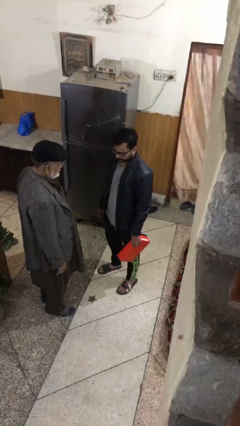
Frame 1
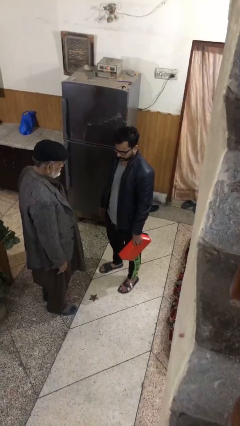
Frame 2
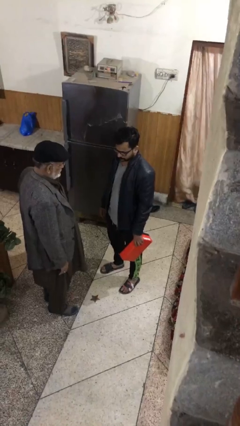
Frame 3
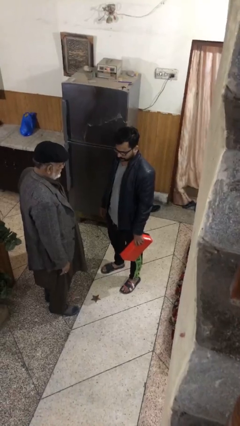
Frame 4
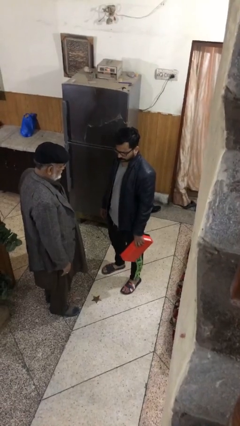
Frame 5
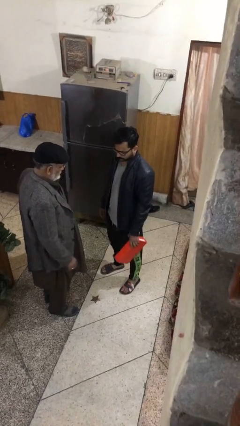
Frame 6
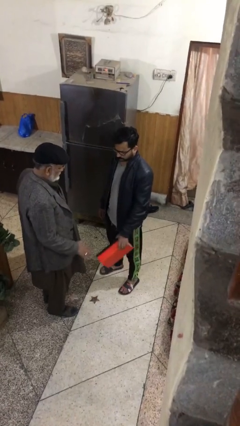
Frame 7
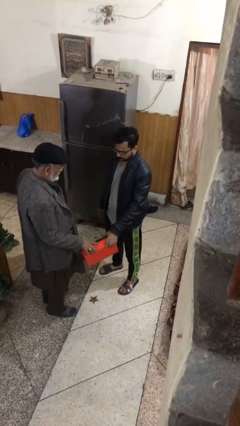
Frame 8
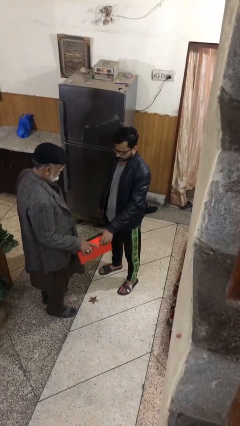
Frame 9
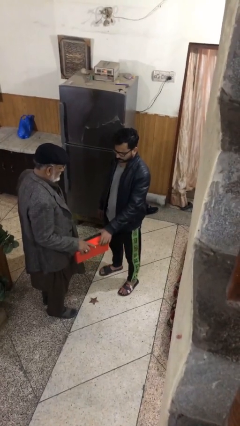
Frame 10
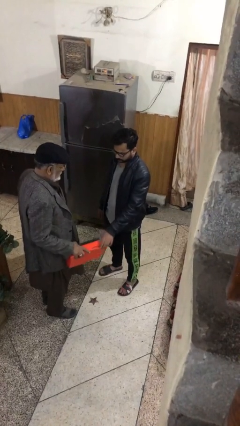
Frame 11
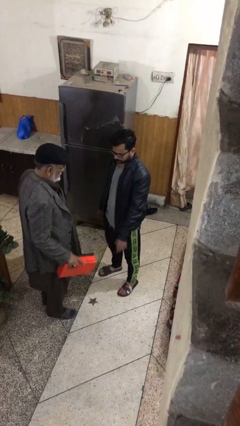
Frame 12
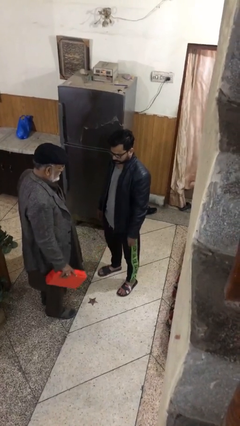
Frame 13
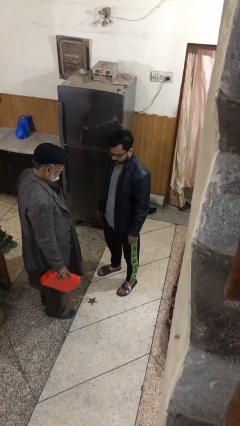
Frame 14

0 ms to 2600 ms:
person transfers object to person

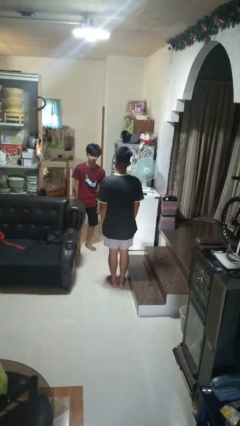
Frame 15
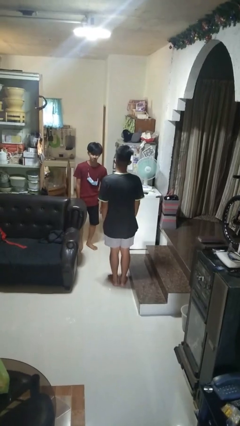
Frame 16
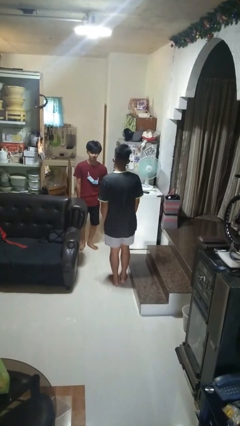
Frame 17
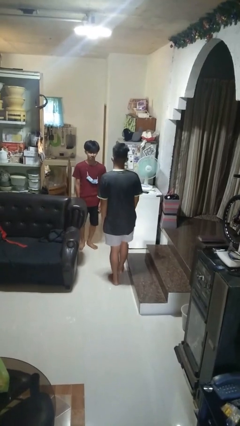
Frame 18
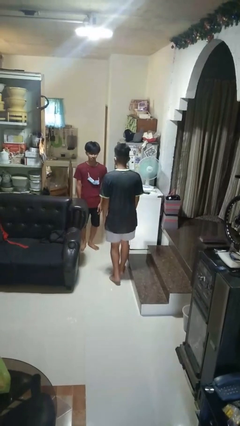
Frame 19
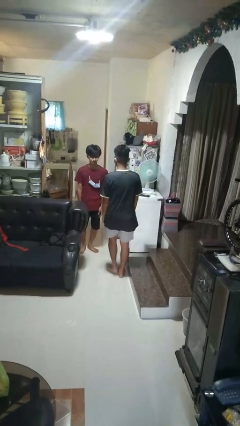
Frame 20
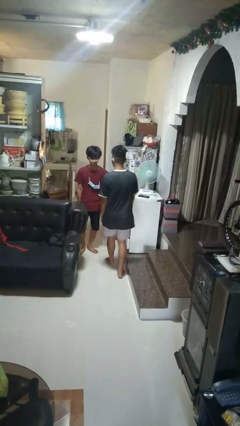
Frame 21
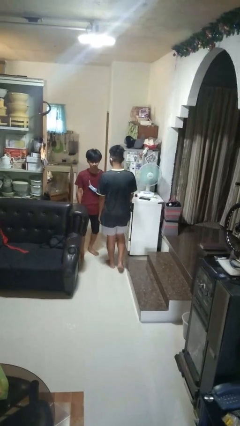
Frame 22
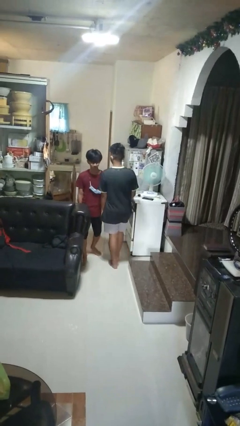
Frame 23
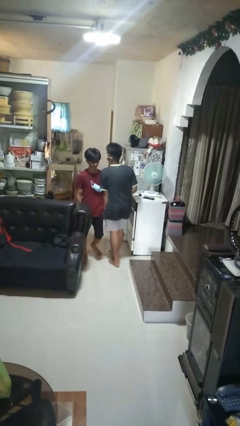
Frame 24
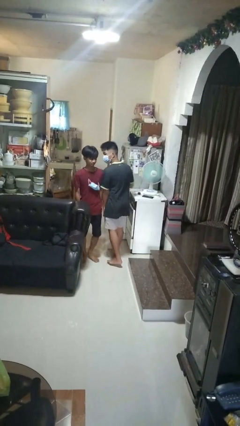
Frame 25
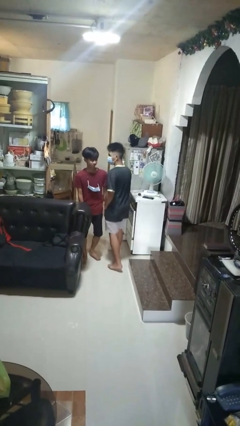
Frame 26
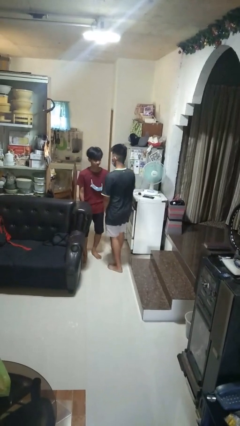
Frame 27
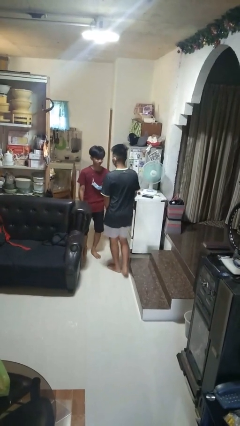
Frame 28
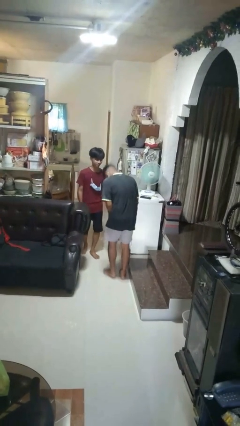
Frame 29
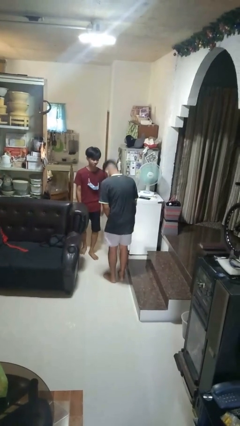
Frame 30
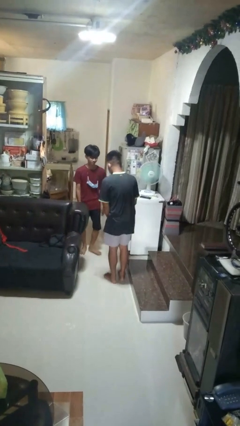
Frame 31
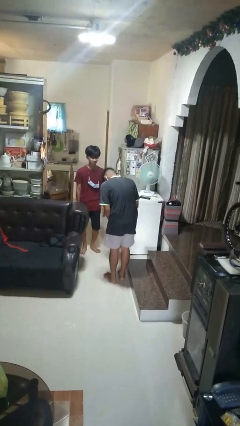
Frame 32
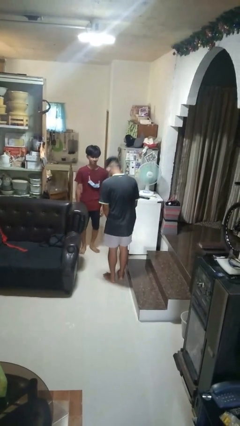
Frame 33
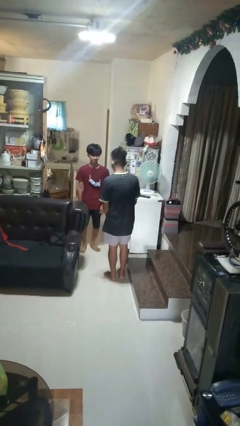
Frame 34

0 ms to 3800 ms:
person bumps into person

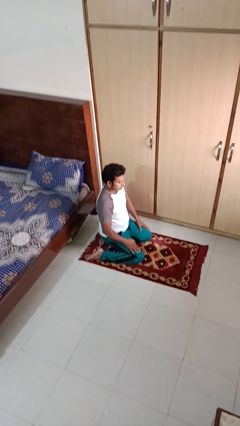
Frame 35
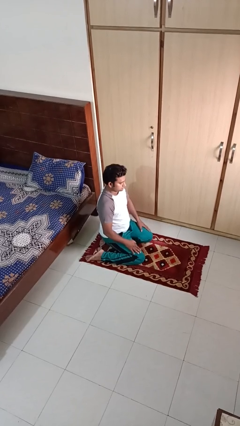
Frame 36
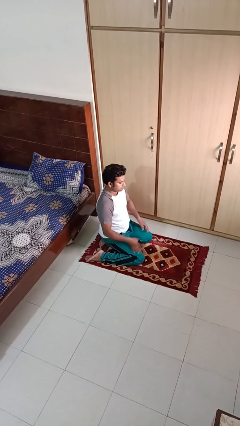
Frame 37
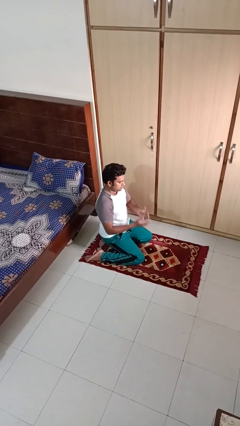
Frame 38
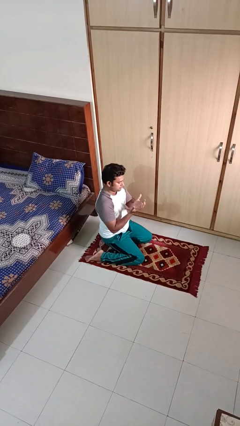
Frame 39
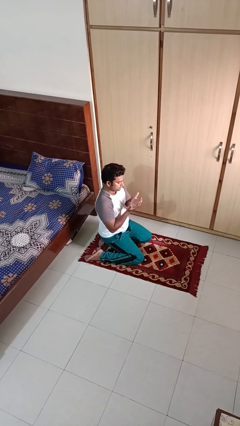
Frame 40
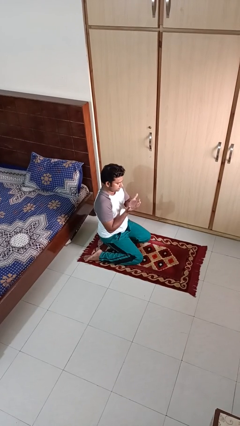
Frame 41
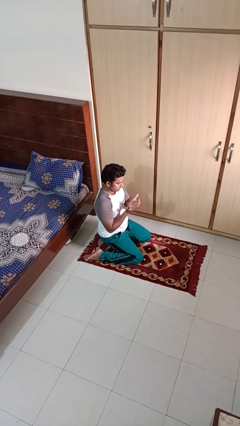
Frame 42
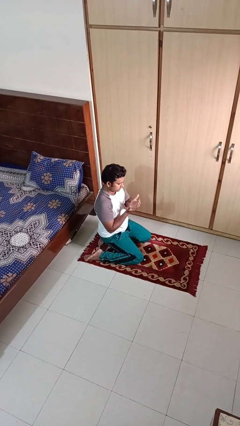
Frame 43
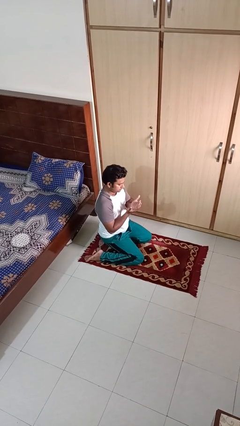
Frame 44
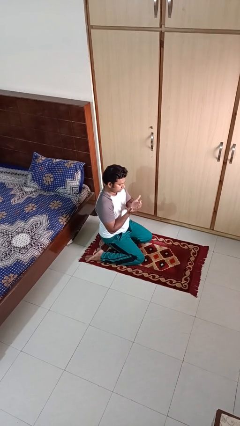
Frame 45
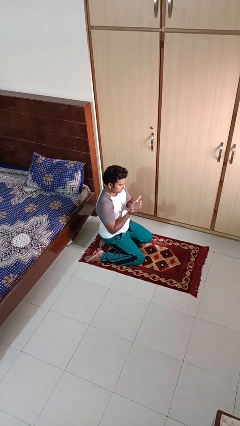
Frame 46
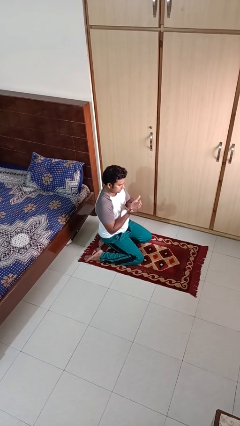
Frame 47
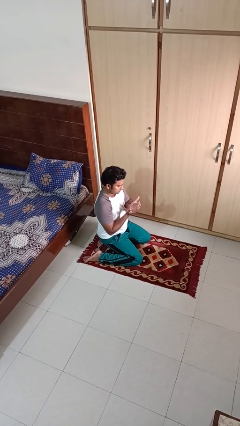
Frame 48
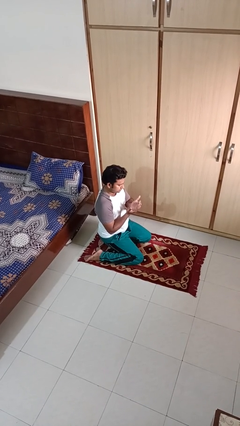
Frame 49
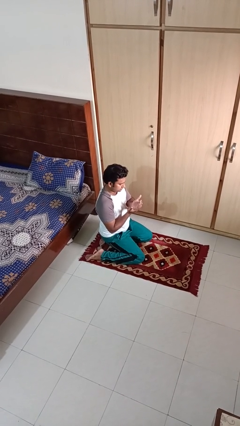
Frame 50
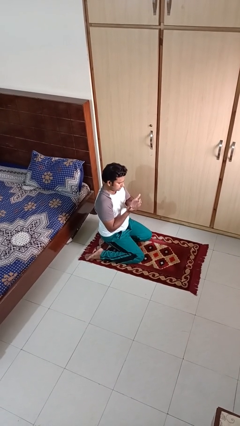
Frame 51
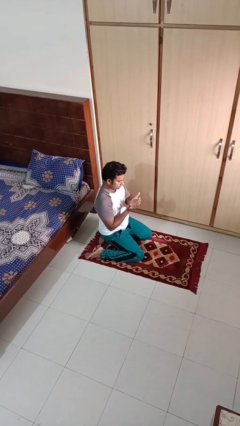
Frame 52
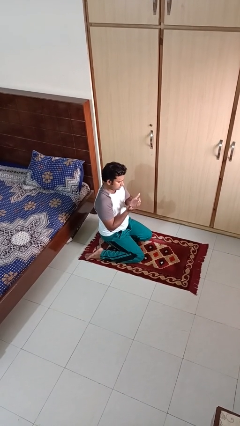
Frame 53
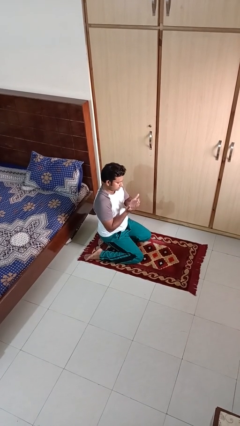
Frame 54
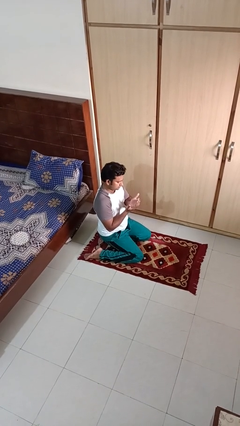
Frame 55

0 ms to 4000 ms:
person prays

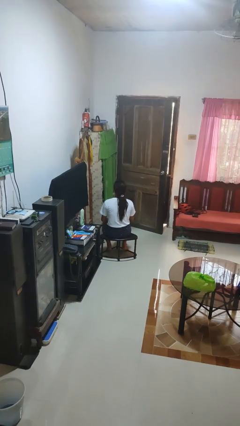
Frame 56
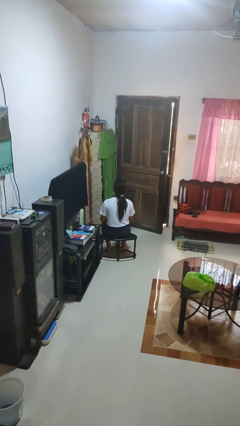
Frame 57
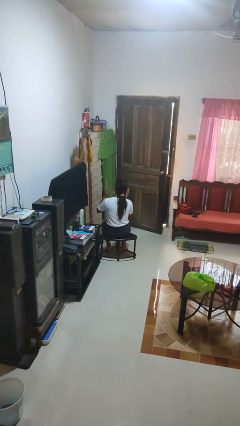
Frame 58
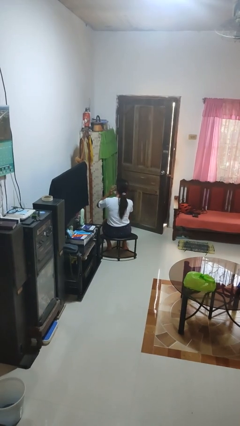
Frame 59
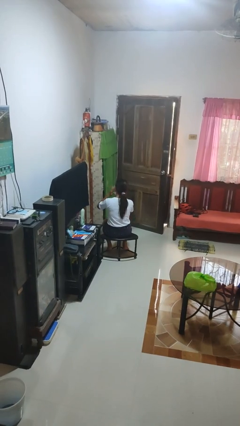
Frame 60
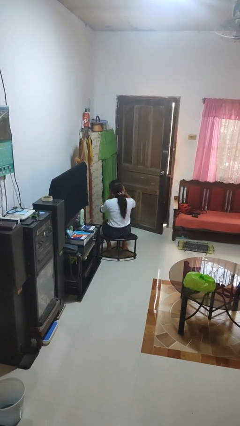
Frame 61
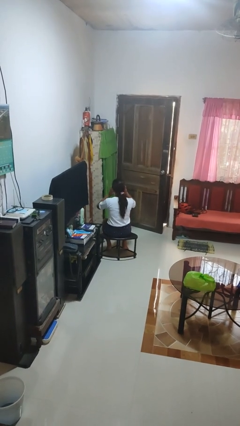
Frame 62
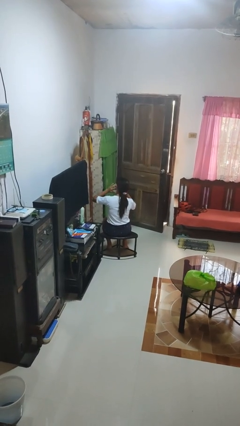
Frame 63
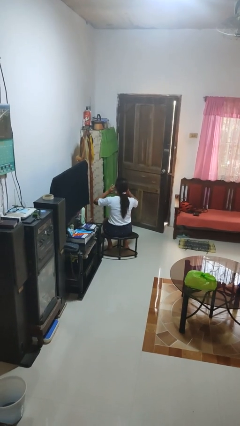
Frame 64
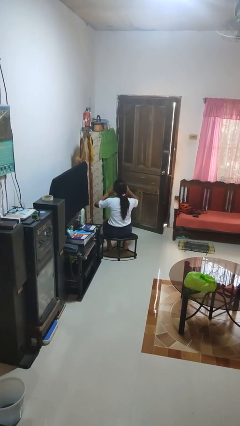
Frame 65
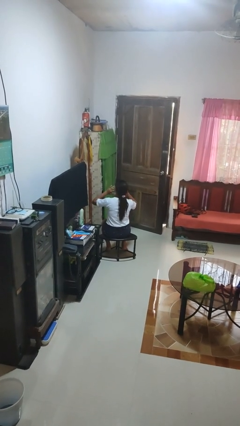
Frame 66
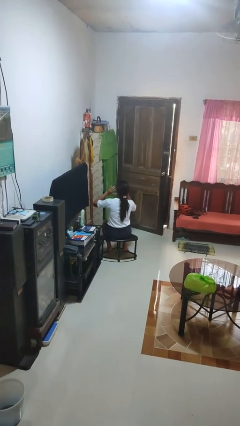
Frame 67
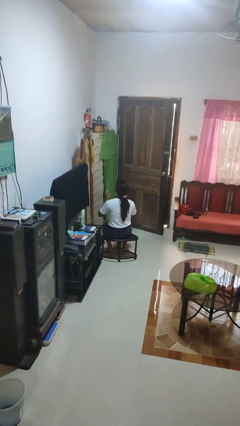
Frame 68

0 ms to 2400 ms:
person puts fingers in ear

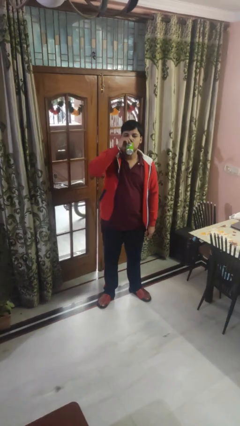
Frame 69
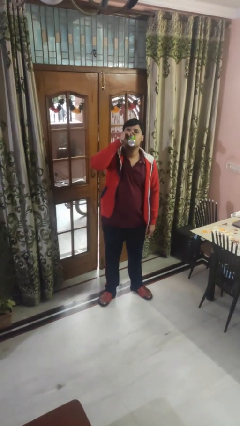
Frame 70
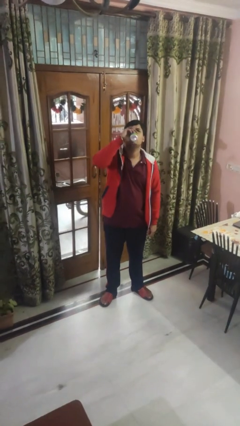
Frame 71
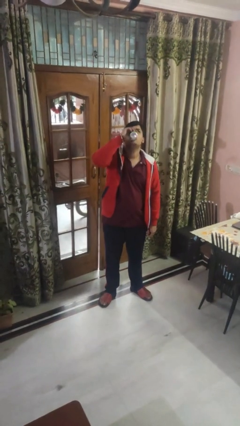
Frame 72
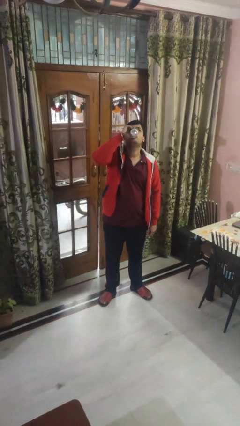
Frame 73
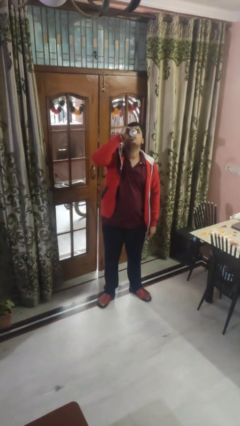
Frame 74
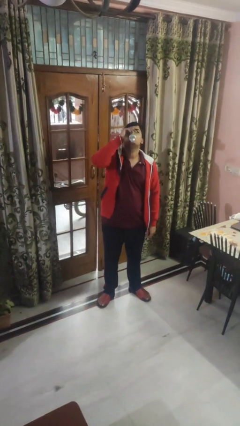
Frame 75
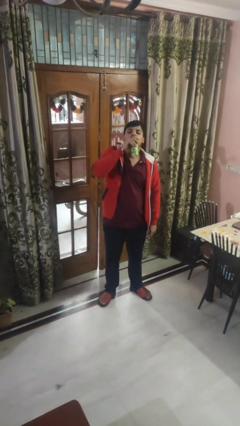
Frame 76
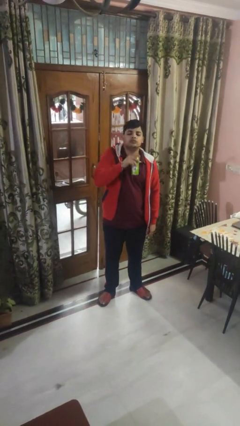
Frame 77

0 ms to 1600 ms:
person drinks from beverage can

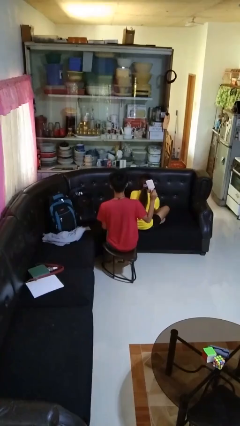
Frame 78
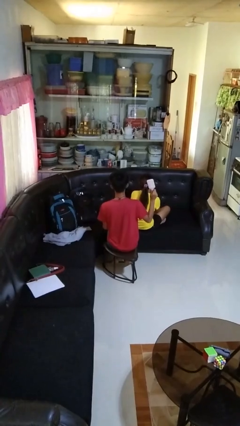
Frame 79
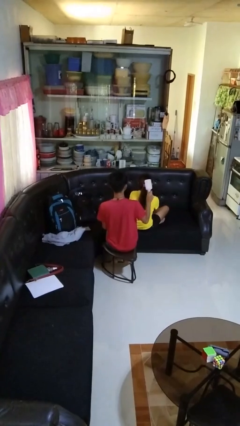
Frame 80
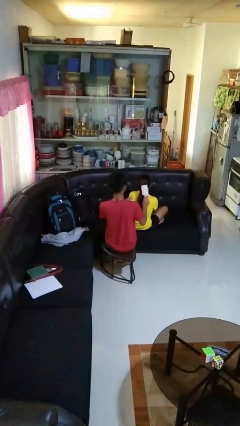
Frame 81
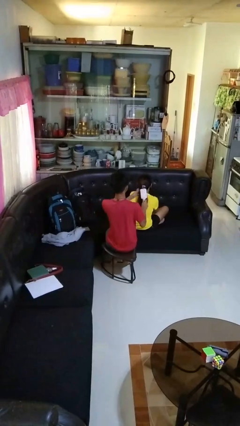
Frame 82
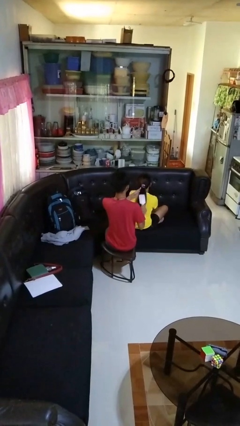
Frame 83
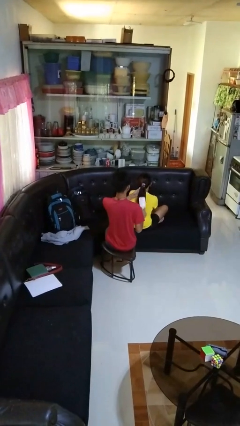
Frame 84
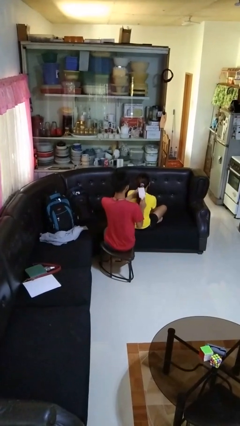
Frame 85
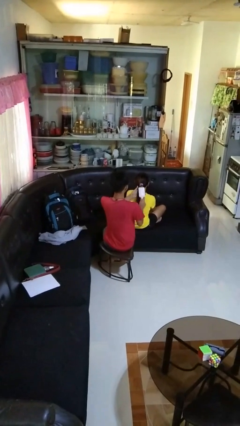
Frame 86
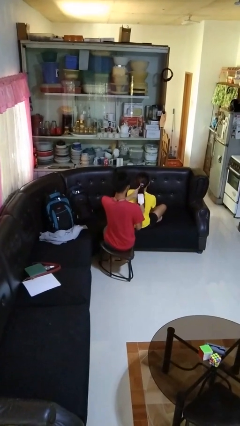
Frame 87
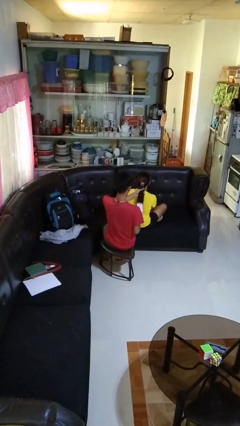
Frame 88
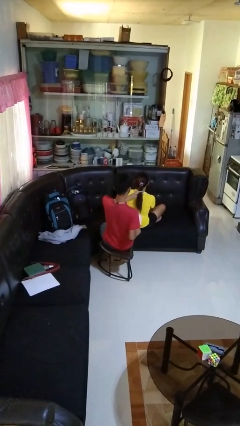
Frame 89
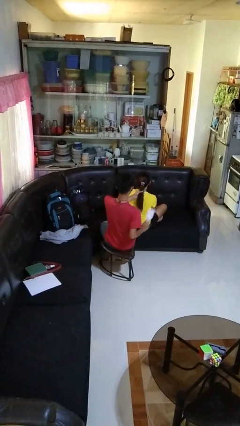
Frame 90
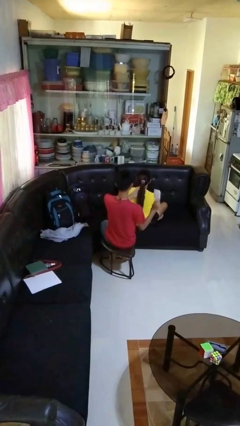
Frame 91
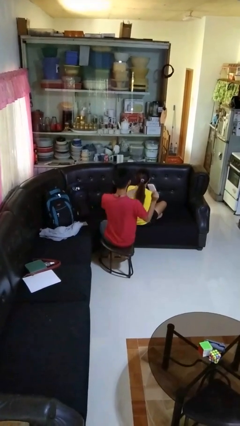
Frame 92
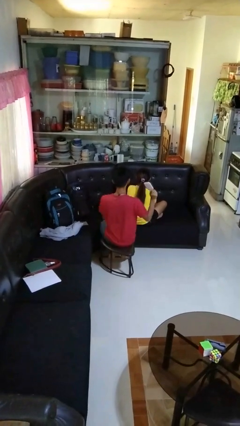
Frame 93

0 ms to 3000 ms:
person brushes hair of person
